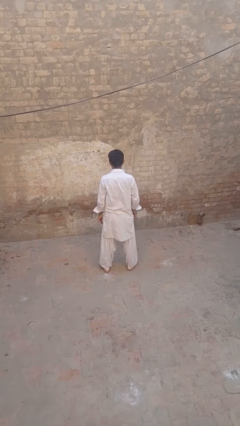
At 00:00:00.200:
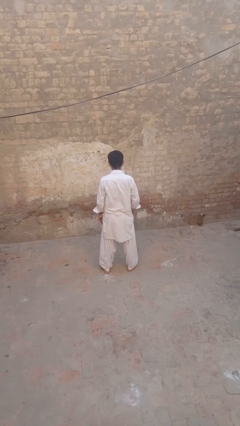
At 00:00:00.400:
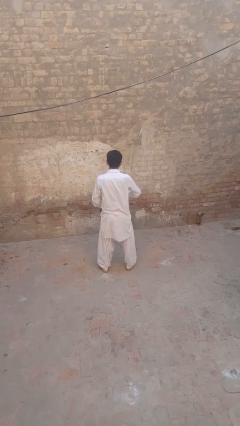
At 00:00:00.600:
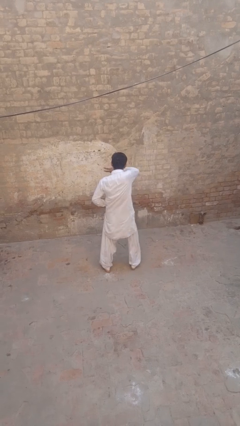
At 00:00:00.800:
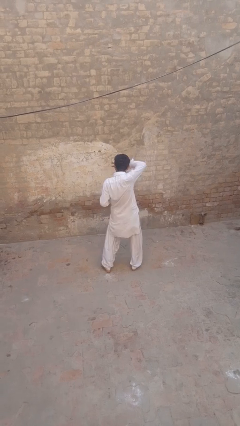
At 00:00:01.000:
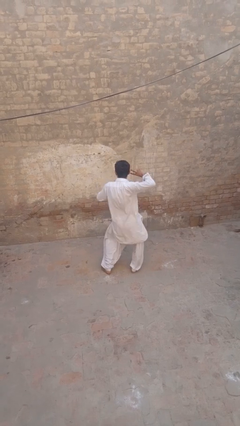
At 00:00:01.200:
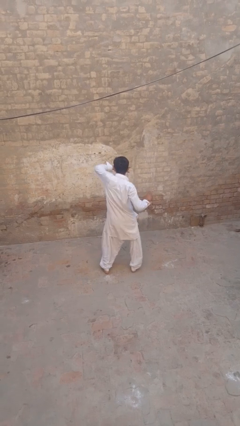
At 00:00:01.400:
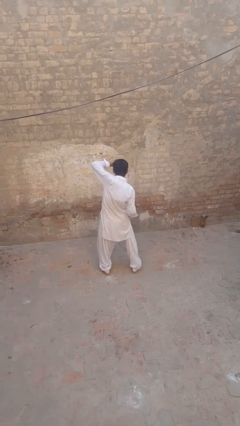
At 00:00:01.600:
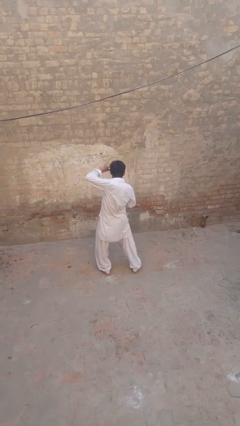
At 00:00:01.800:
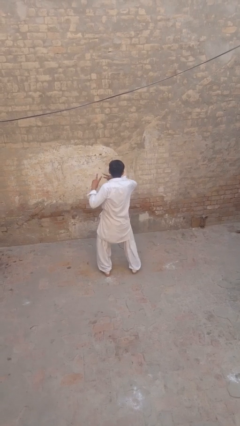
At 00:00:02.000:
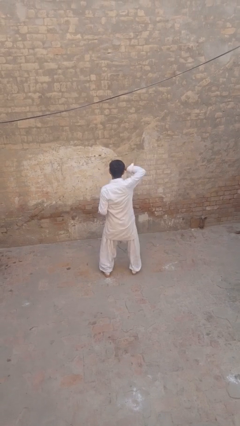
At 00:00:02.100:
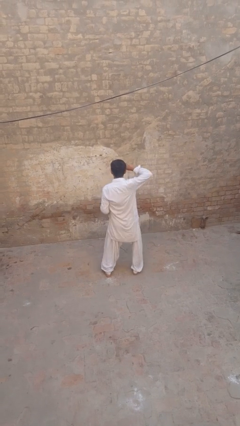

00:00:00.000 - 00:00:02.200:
person dances in place

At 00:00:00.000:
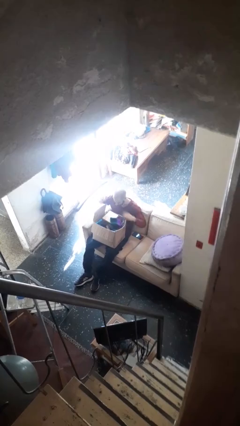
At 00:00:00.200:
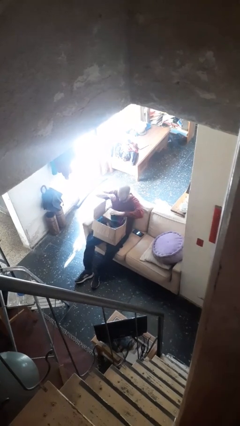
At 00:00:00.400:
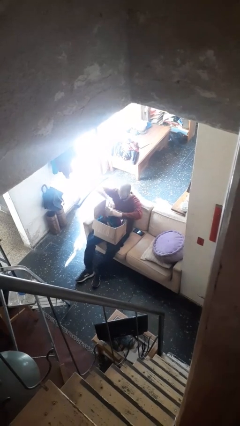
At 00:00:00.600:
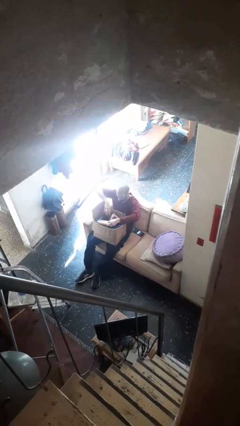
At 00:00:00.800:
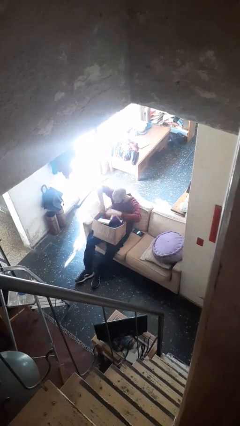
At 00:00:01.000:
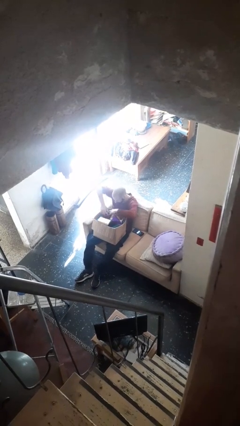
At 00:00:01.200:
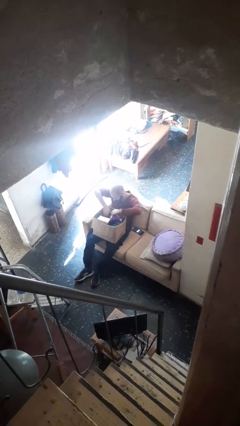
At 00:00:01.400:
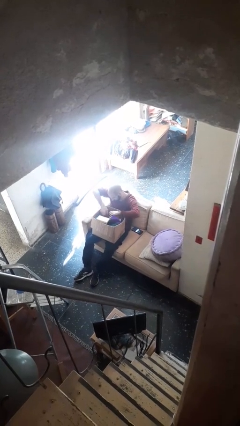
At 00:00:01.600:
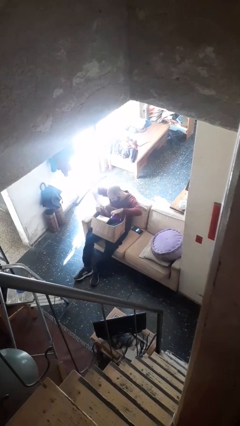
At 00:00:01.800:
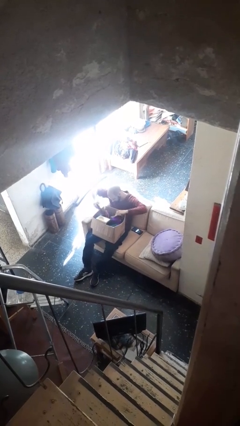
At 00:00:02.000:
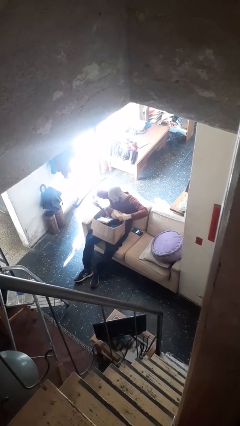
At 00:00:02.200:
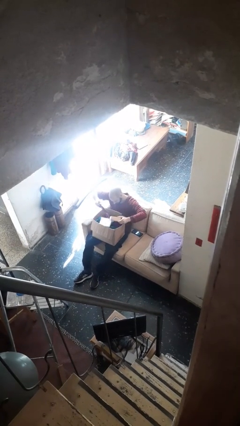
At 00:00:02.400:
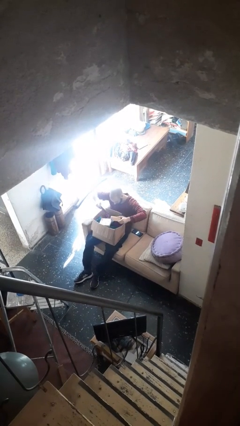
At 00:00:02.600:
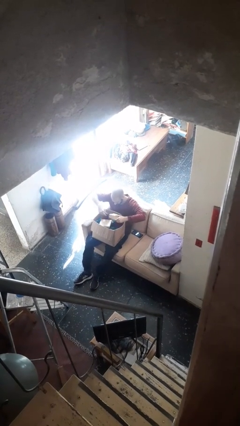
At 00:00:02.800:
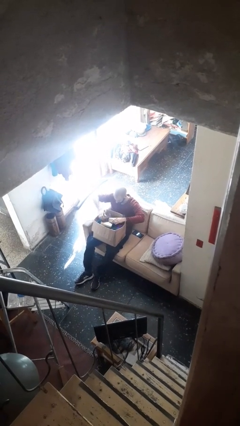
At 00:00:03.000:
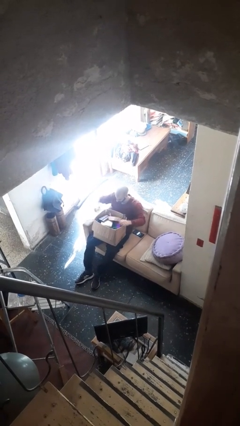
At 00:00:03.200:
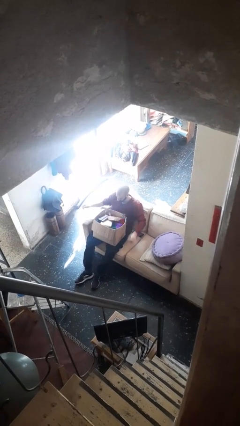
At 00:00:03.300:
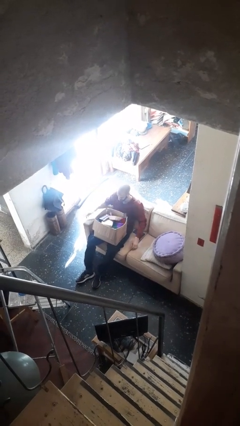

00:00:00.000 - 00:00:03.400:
person searches in box

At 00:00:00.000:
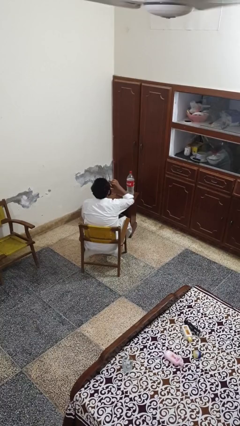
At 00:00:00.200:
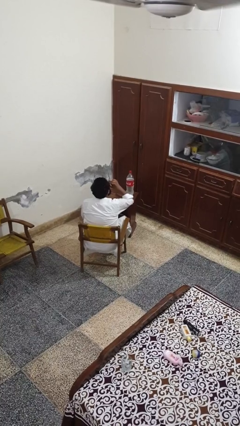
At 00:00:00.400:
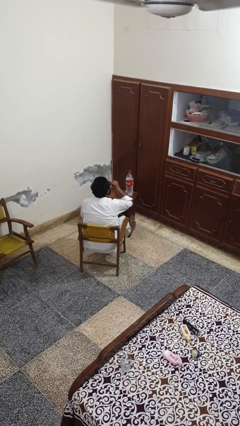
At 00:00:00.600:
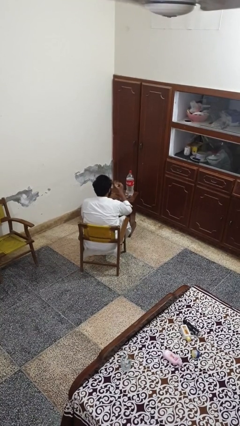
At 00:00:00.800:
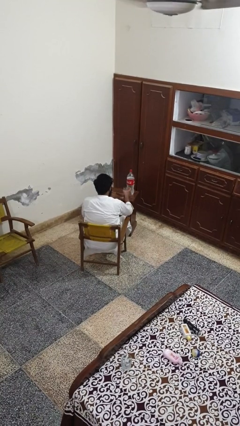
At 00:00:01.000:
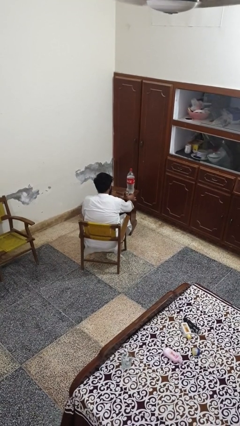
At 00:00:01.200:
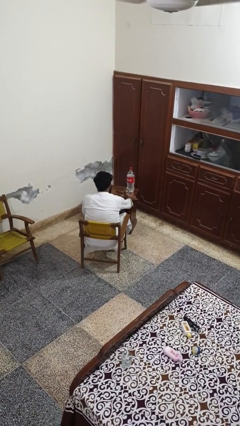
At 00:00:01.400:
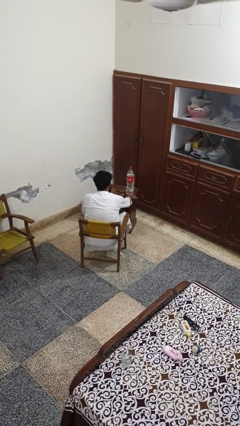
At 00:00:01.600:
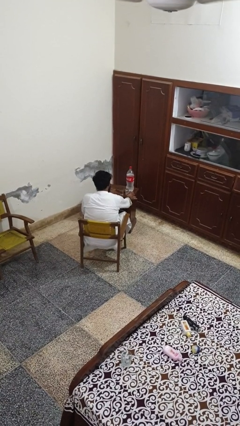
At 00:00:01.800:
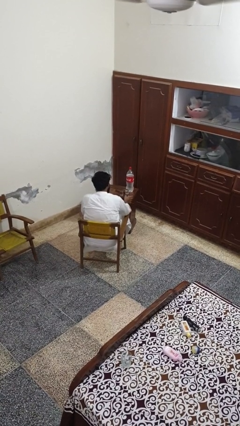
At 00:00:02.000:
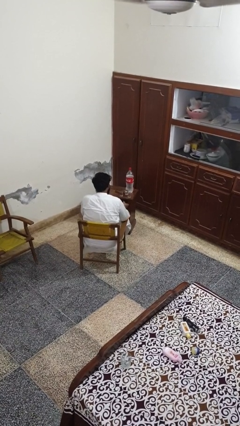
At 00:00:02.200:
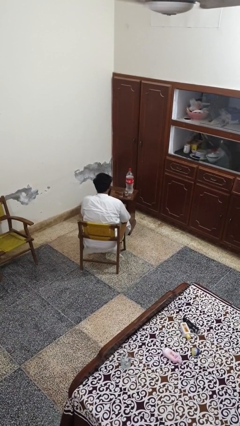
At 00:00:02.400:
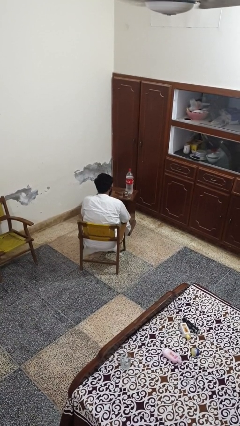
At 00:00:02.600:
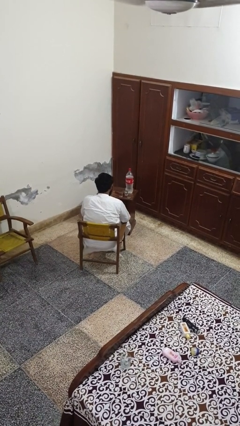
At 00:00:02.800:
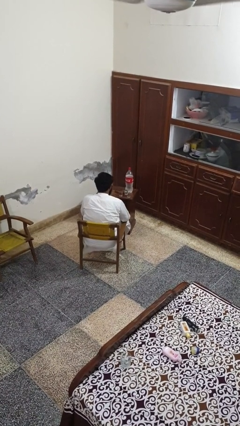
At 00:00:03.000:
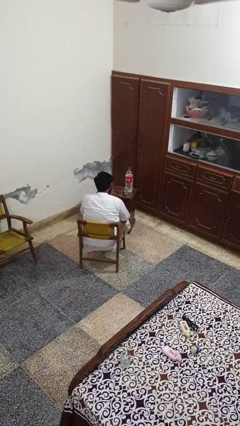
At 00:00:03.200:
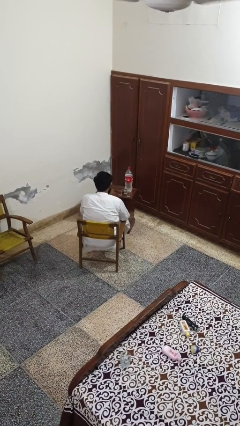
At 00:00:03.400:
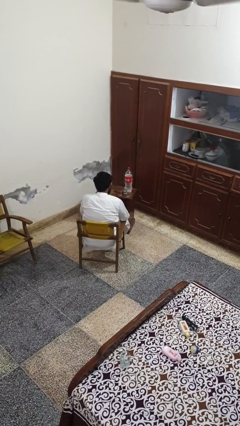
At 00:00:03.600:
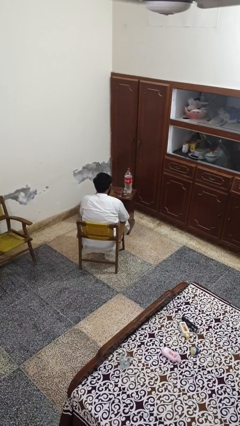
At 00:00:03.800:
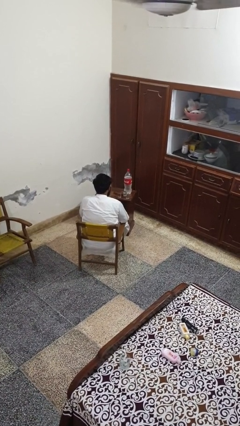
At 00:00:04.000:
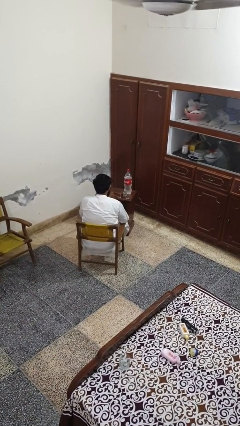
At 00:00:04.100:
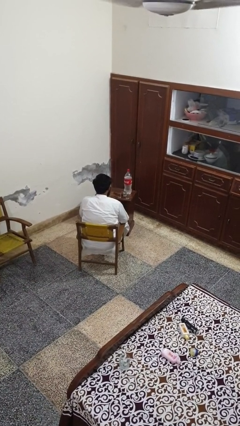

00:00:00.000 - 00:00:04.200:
person puts down object on table

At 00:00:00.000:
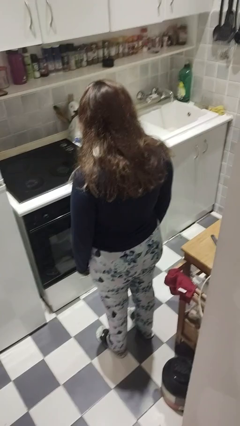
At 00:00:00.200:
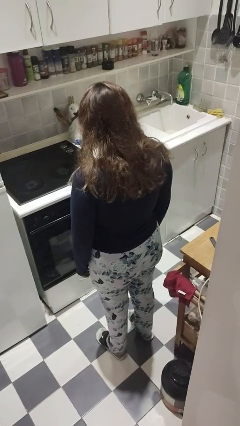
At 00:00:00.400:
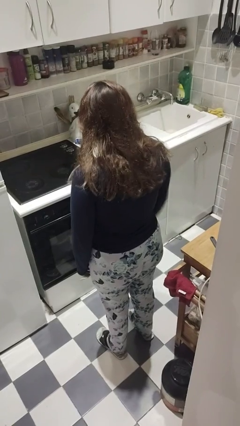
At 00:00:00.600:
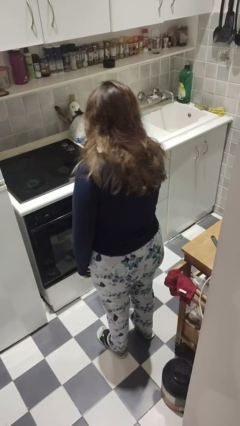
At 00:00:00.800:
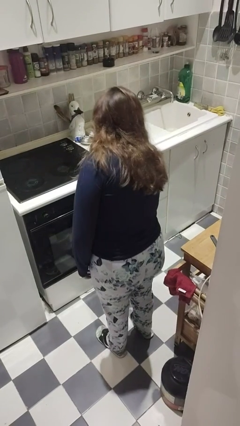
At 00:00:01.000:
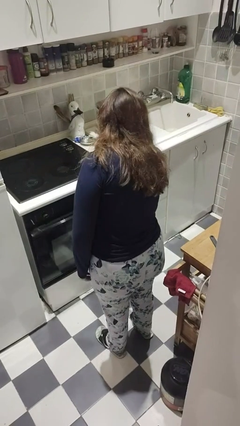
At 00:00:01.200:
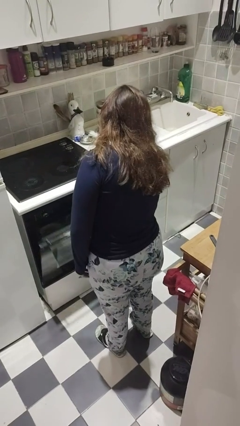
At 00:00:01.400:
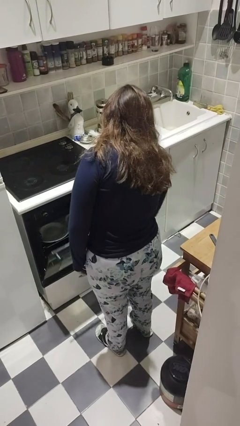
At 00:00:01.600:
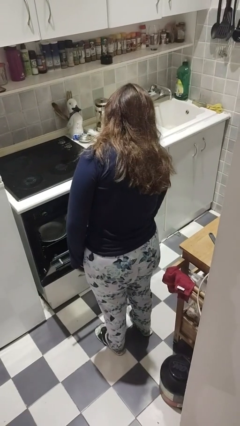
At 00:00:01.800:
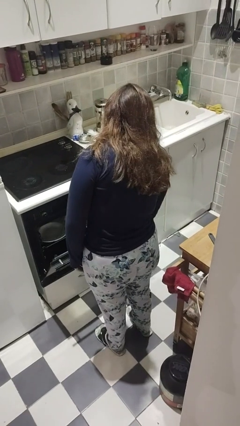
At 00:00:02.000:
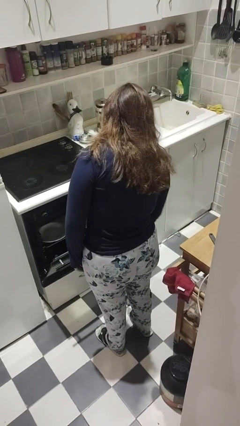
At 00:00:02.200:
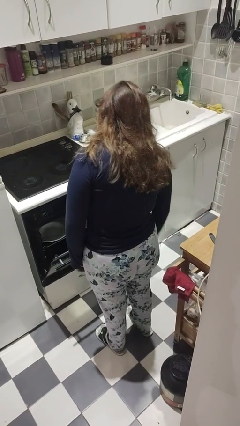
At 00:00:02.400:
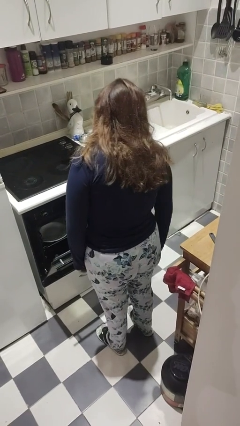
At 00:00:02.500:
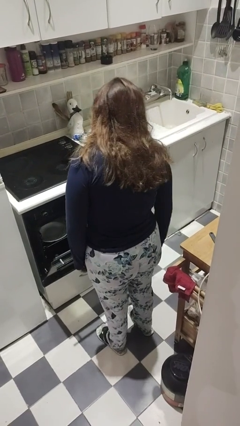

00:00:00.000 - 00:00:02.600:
person opens dishwasher

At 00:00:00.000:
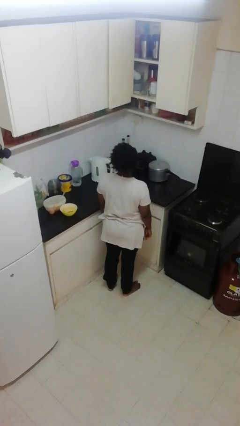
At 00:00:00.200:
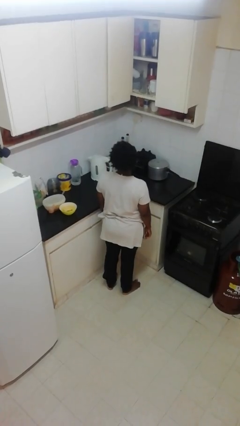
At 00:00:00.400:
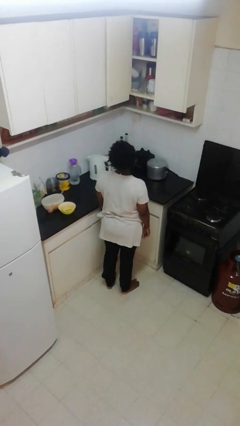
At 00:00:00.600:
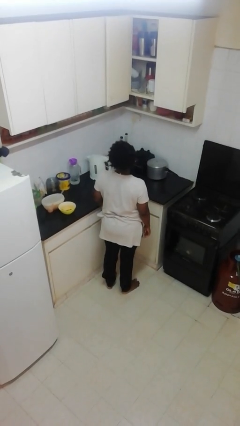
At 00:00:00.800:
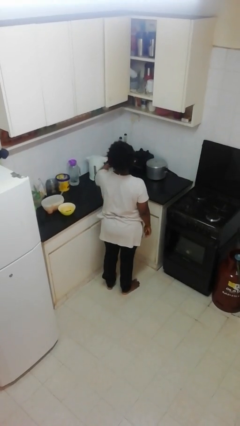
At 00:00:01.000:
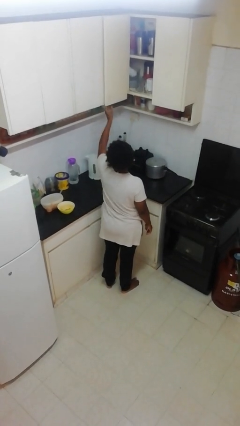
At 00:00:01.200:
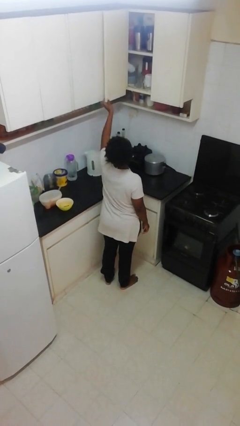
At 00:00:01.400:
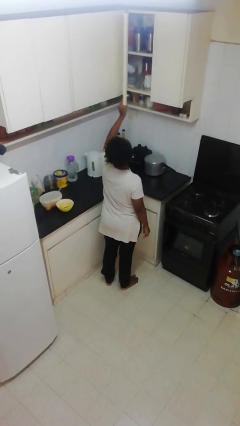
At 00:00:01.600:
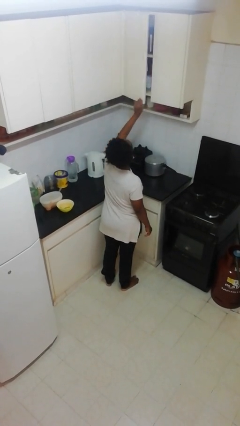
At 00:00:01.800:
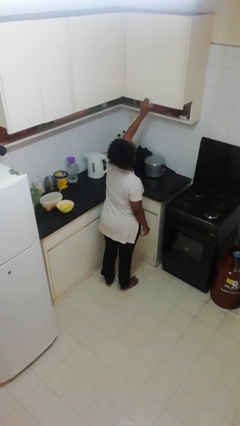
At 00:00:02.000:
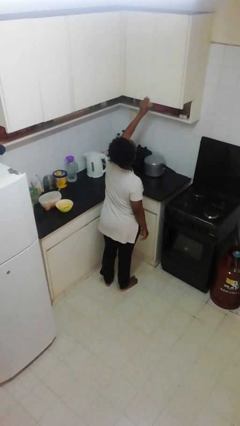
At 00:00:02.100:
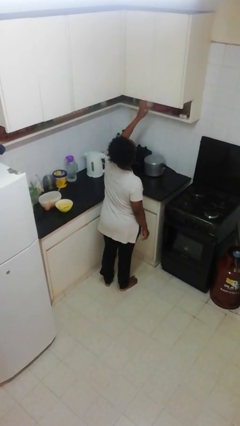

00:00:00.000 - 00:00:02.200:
person closes cabinet

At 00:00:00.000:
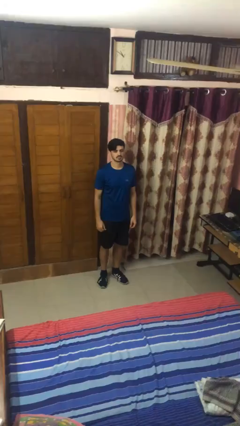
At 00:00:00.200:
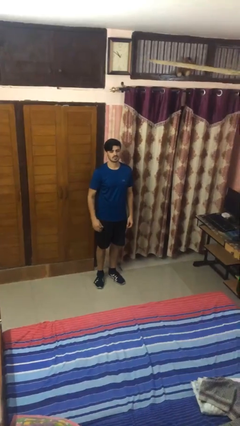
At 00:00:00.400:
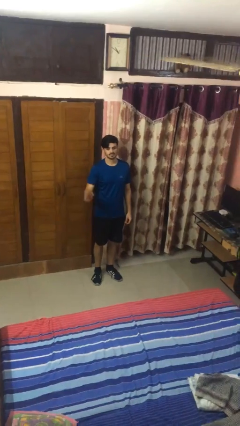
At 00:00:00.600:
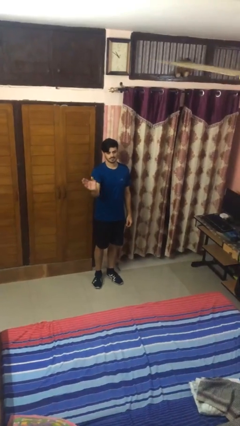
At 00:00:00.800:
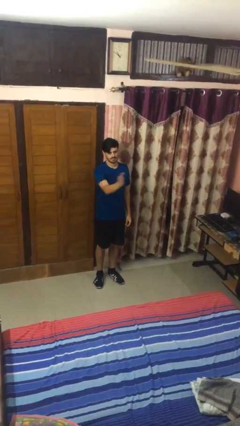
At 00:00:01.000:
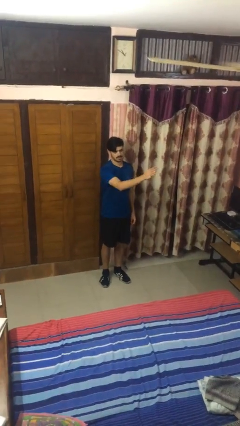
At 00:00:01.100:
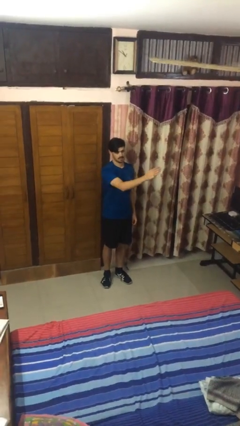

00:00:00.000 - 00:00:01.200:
person gestures swipe left

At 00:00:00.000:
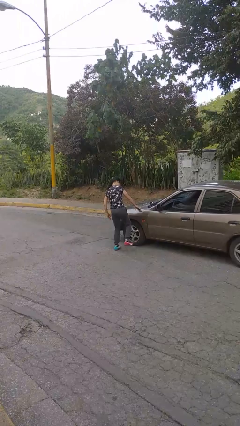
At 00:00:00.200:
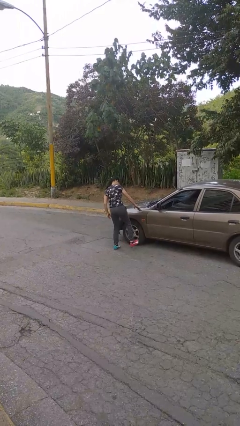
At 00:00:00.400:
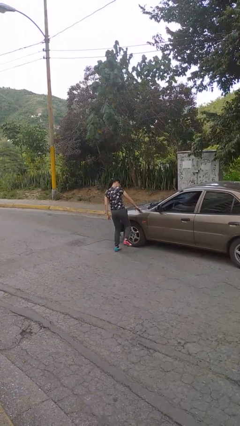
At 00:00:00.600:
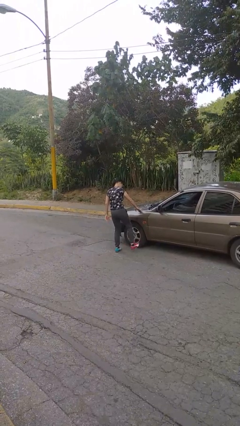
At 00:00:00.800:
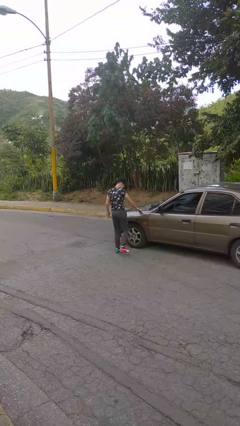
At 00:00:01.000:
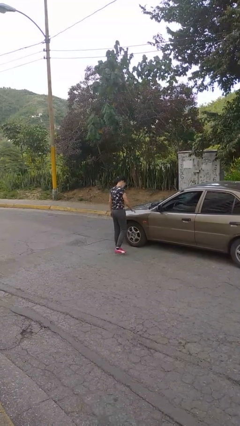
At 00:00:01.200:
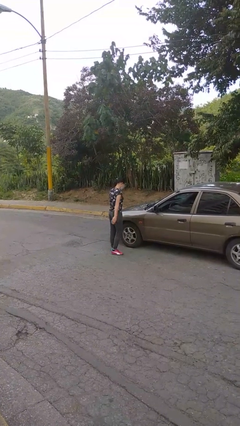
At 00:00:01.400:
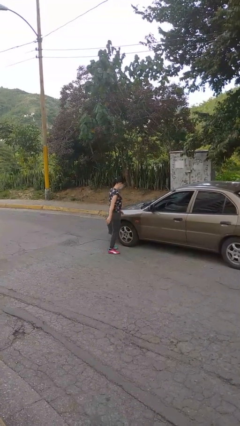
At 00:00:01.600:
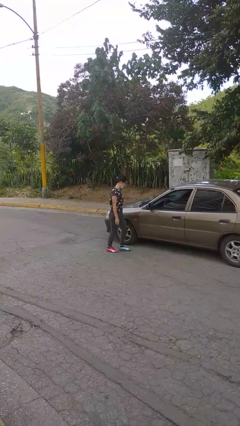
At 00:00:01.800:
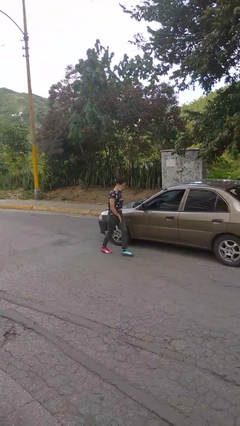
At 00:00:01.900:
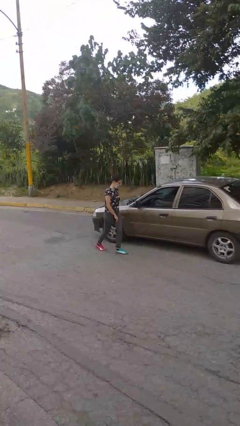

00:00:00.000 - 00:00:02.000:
person kicks car tires
